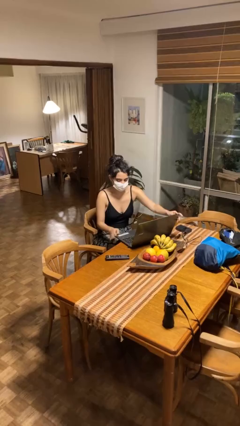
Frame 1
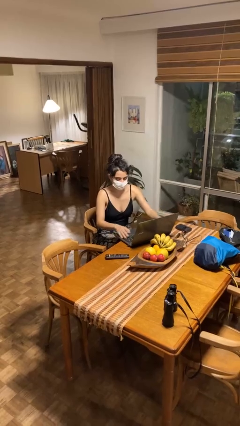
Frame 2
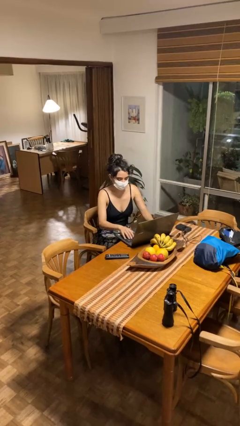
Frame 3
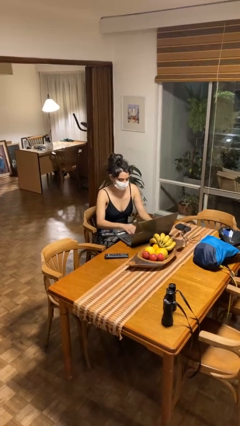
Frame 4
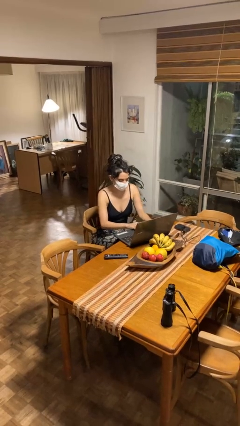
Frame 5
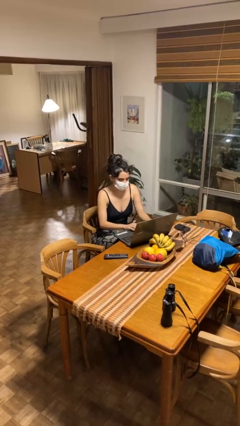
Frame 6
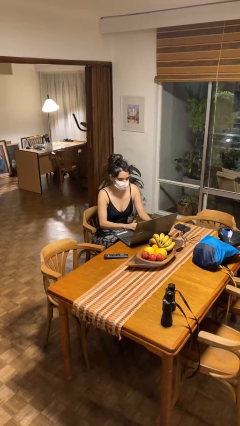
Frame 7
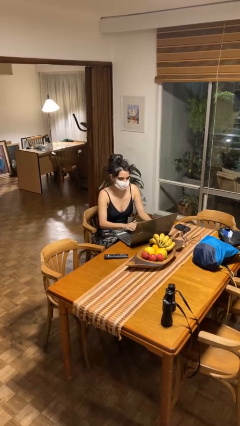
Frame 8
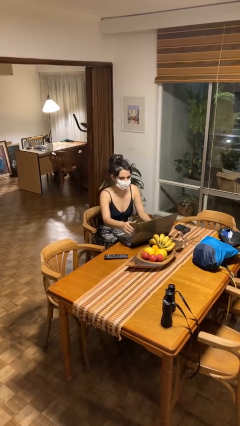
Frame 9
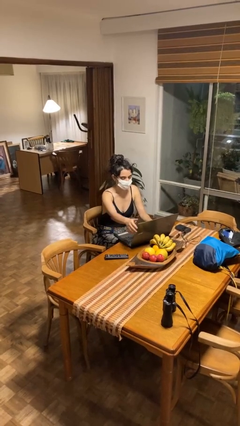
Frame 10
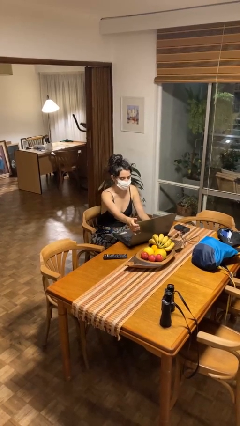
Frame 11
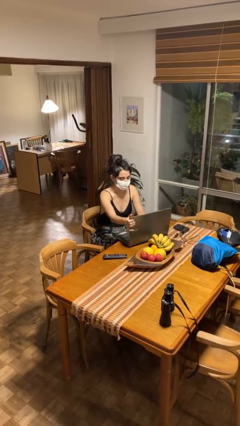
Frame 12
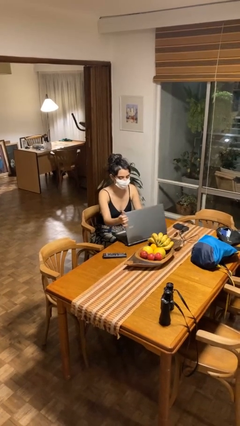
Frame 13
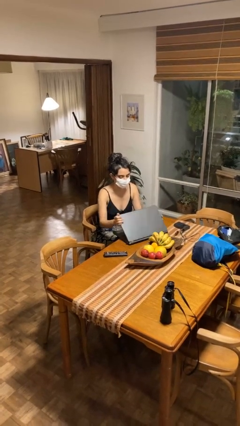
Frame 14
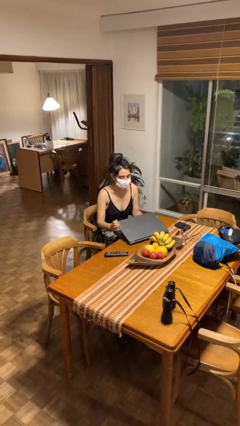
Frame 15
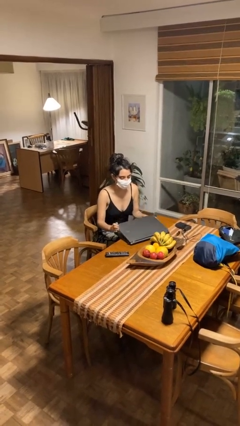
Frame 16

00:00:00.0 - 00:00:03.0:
person interacts with laptop

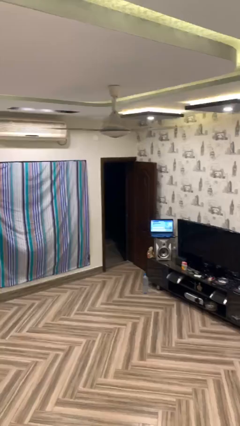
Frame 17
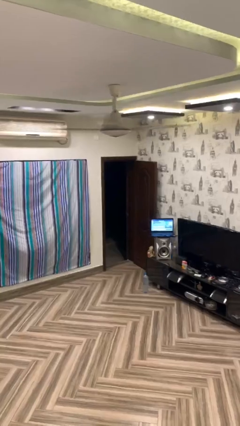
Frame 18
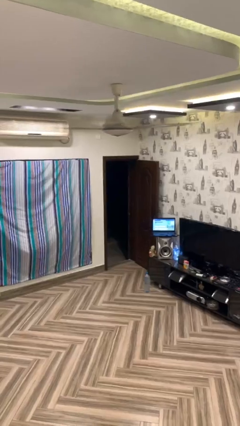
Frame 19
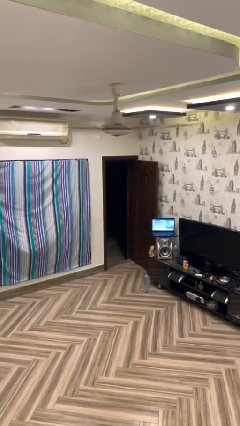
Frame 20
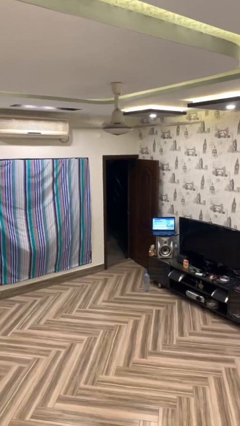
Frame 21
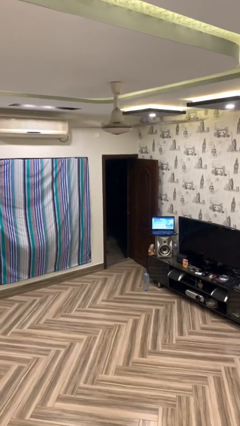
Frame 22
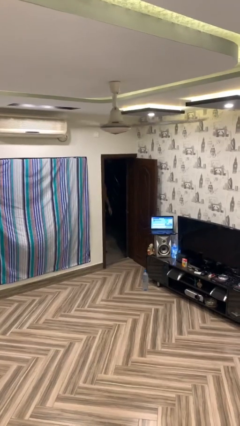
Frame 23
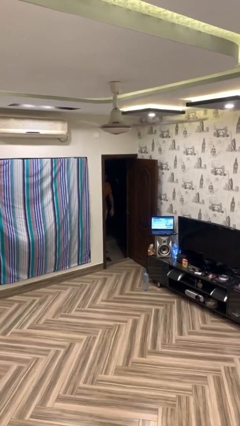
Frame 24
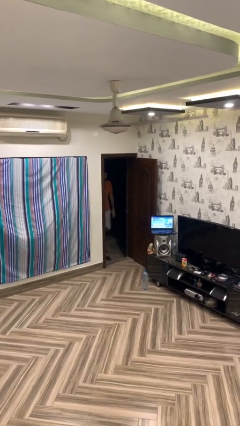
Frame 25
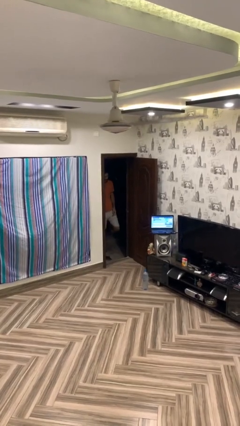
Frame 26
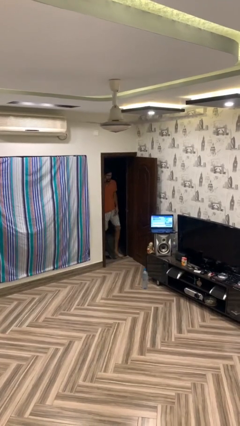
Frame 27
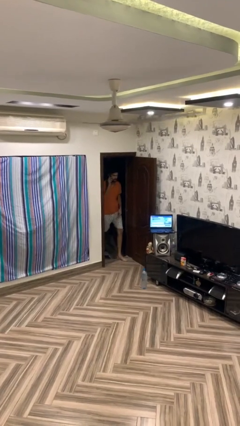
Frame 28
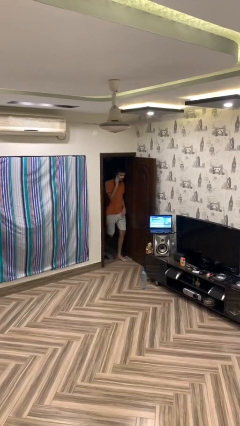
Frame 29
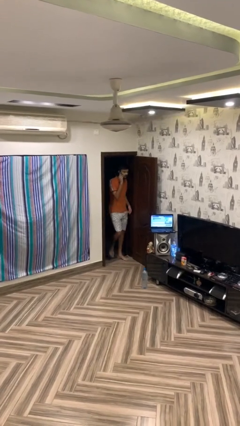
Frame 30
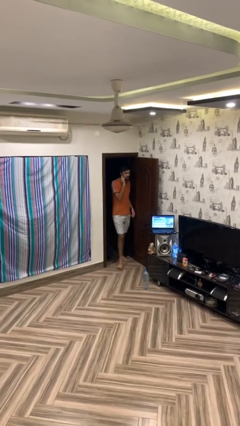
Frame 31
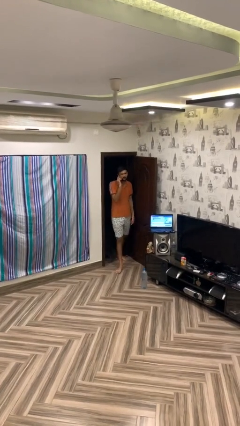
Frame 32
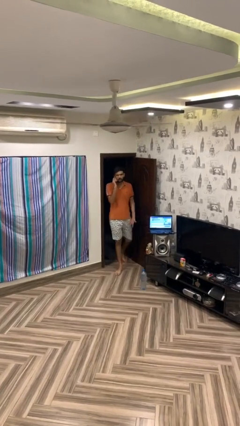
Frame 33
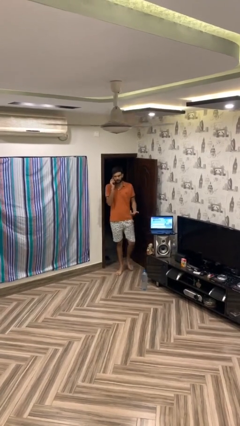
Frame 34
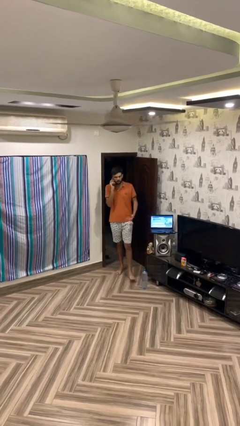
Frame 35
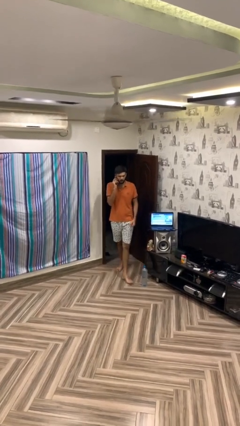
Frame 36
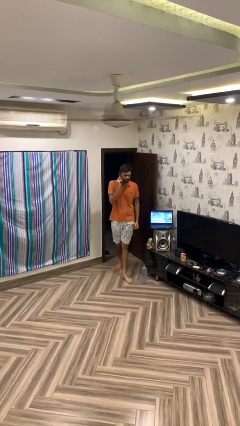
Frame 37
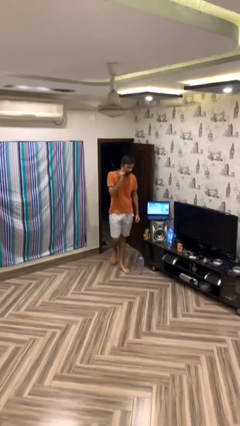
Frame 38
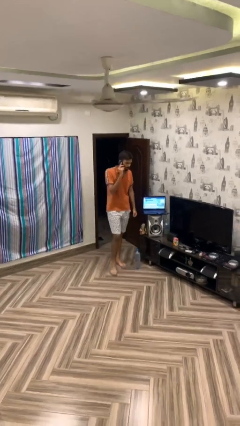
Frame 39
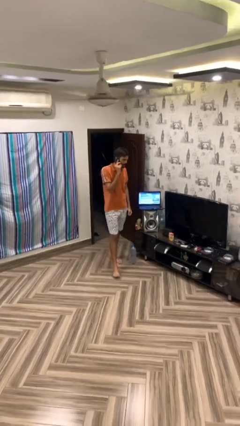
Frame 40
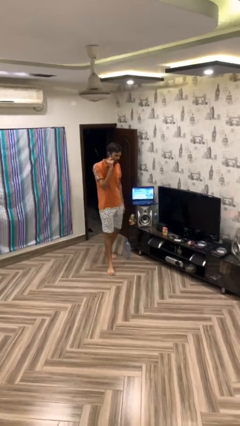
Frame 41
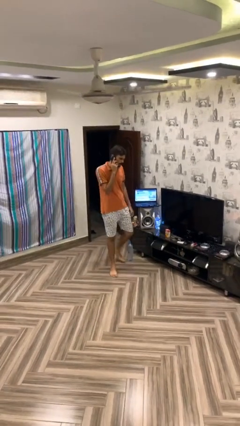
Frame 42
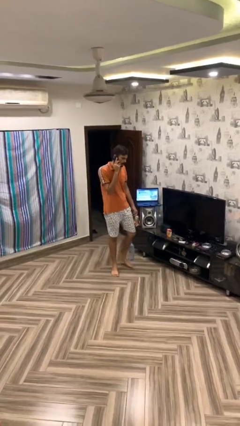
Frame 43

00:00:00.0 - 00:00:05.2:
person enters scene through structure

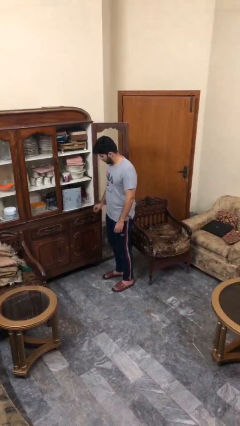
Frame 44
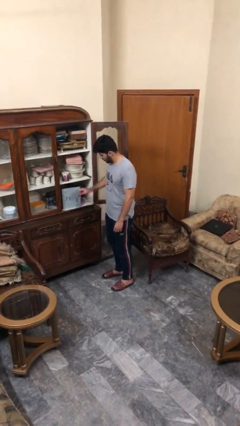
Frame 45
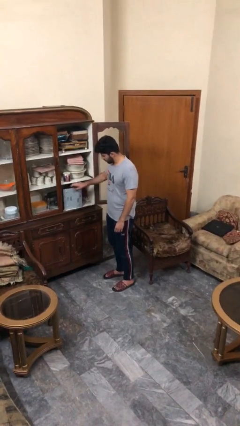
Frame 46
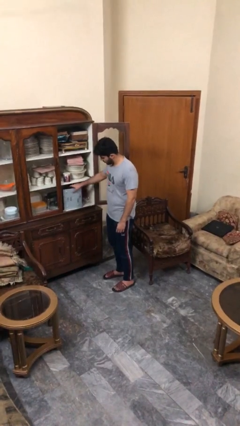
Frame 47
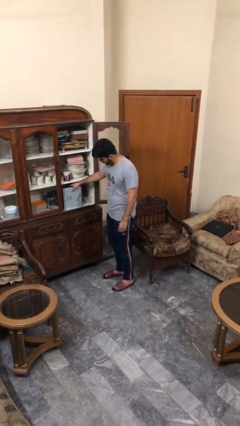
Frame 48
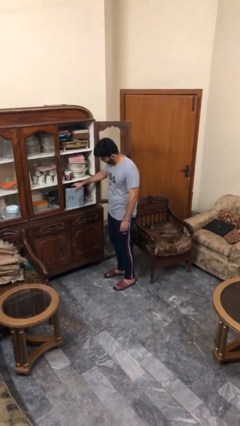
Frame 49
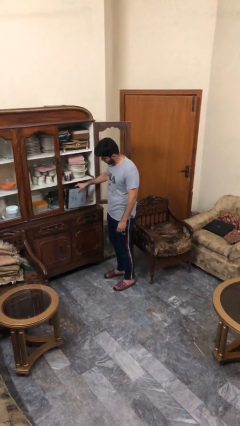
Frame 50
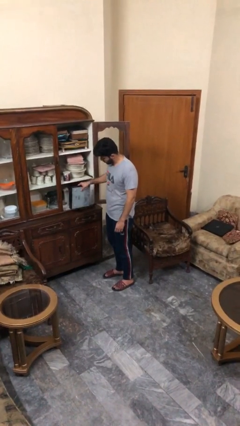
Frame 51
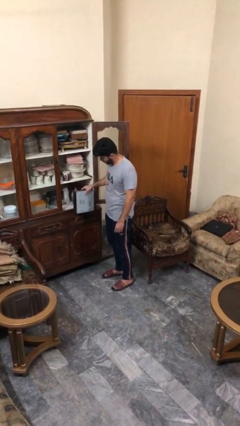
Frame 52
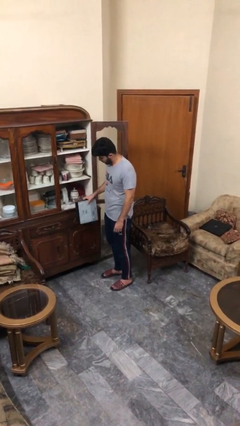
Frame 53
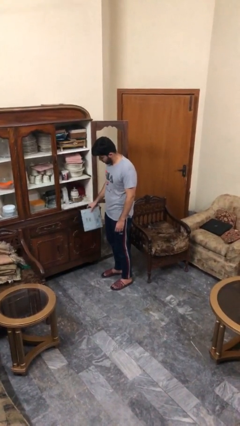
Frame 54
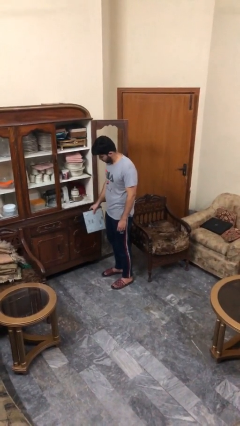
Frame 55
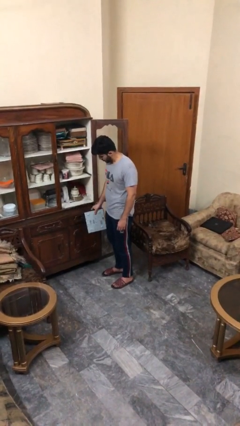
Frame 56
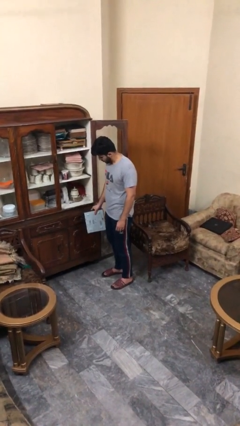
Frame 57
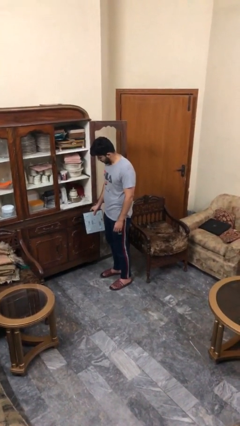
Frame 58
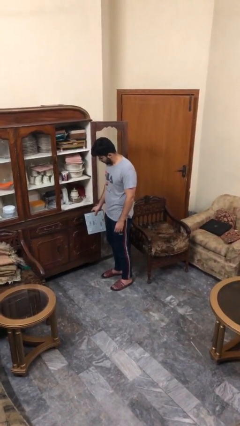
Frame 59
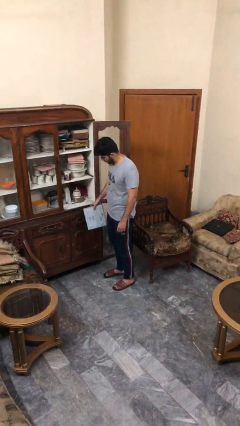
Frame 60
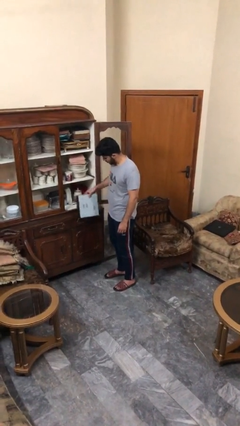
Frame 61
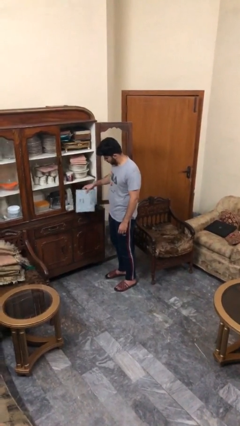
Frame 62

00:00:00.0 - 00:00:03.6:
person picks up object from cabinet

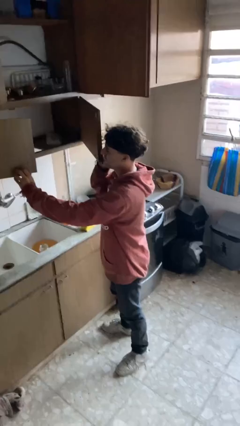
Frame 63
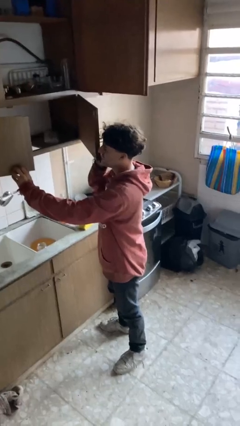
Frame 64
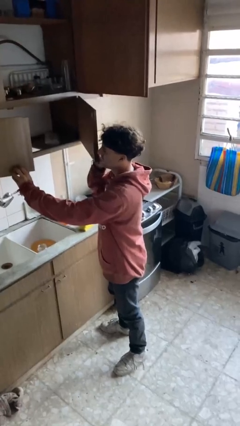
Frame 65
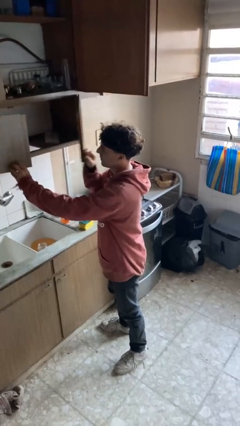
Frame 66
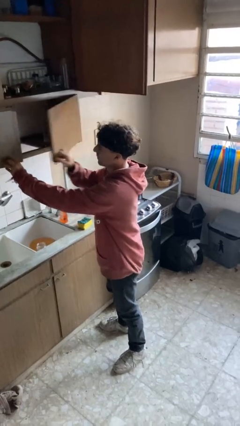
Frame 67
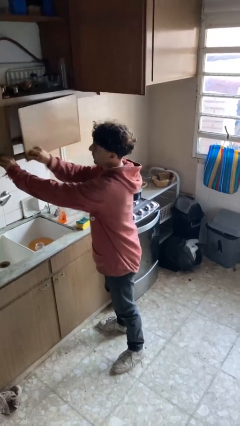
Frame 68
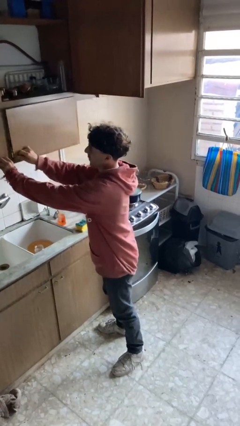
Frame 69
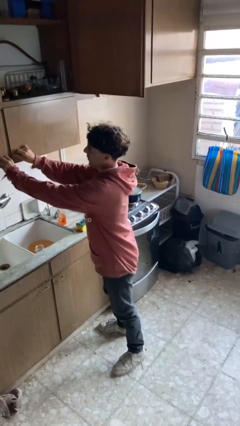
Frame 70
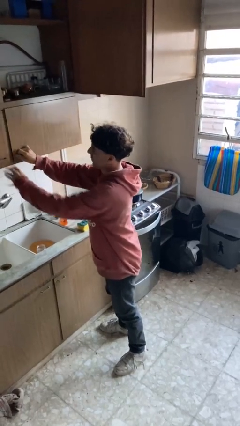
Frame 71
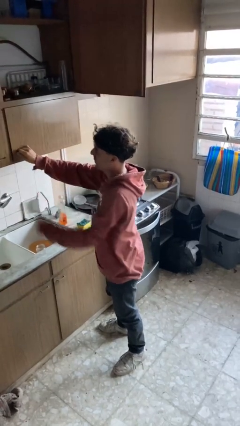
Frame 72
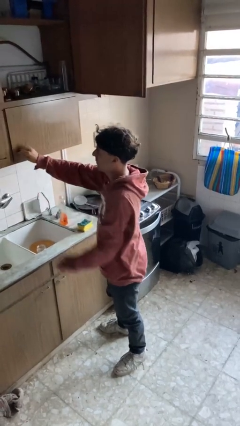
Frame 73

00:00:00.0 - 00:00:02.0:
person closes cabinet

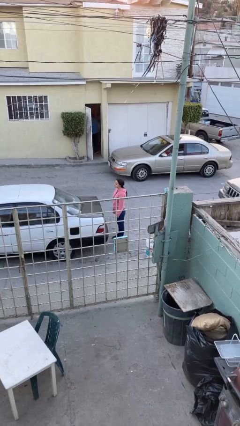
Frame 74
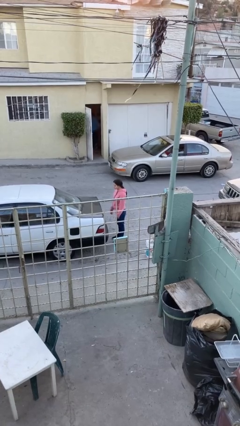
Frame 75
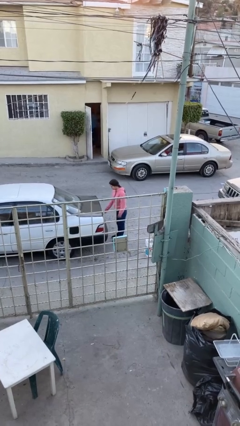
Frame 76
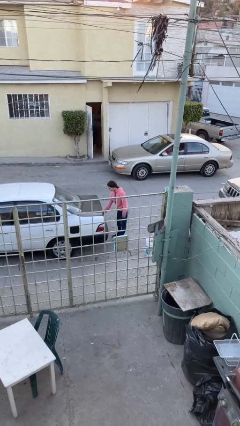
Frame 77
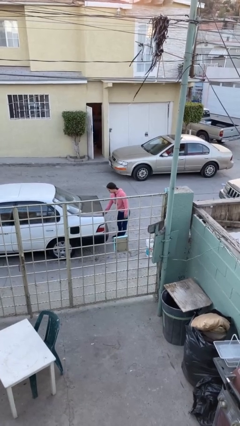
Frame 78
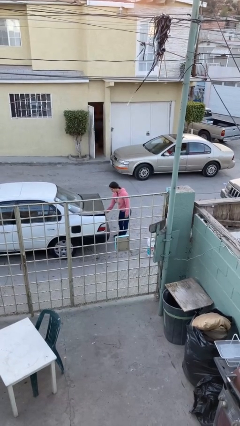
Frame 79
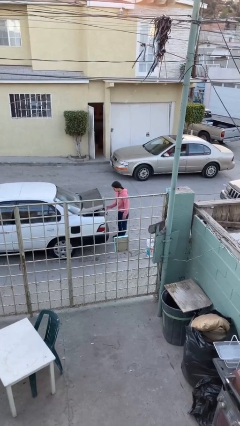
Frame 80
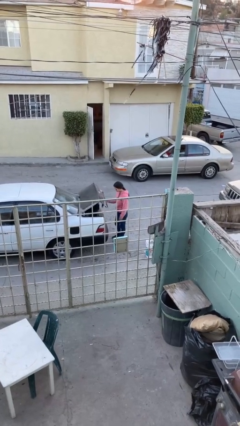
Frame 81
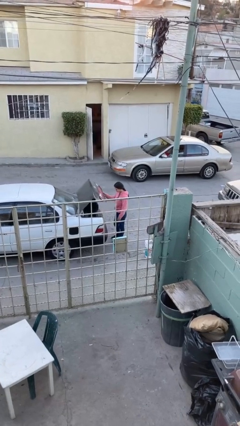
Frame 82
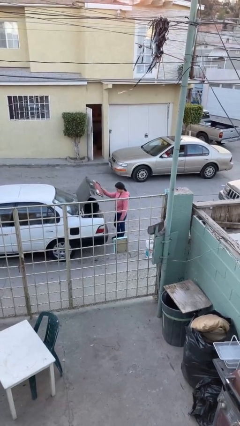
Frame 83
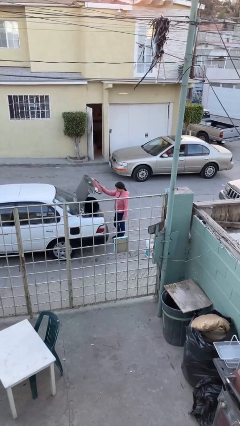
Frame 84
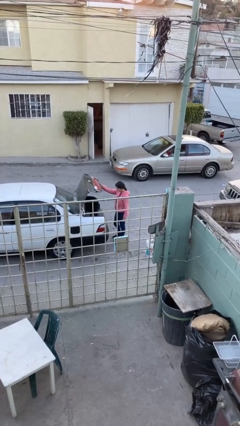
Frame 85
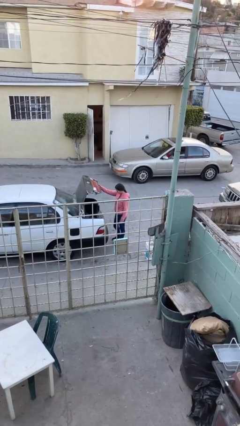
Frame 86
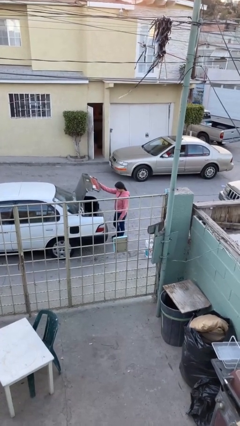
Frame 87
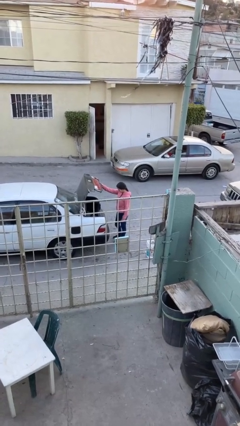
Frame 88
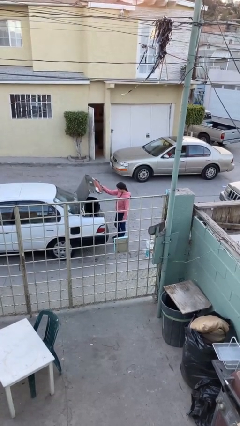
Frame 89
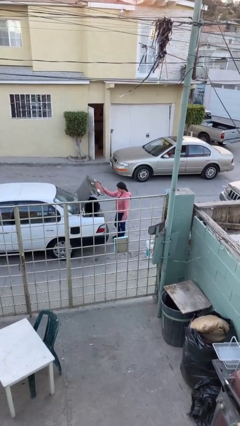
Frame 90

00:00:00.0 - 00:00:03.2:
person opens car trunk
